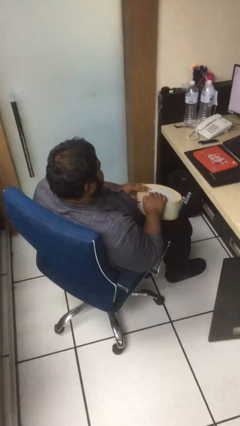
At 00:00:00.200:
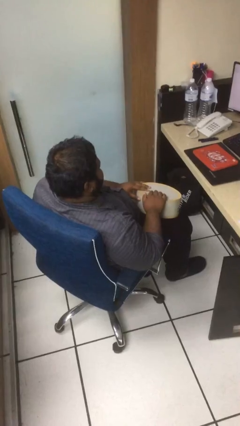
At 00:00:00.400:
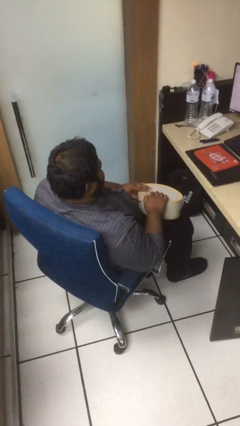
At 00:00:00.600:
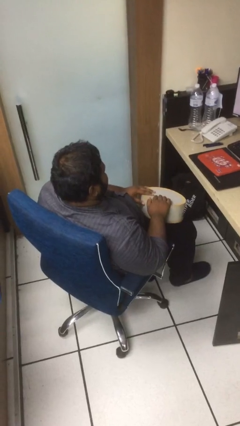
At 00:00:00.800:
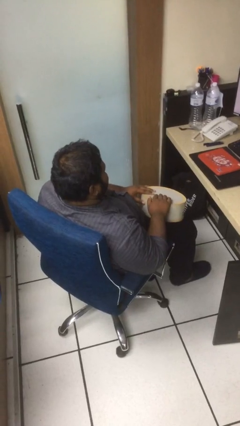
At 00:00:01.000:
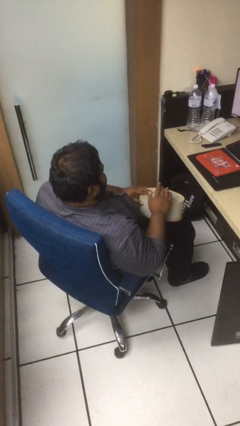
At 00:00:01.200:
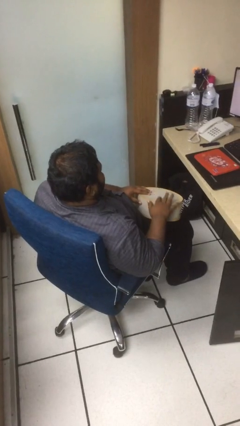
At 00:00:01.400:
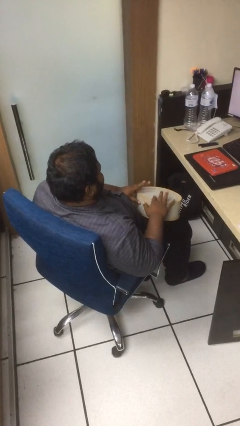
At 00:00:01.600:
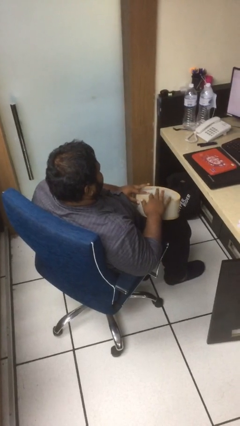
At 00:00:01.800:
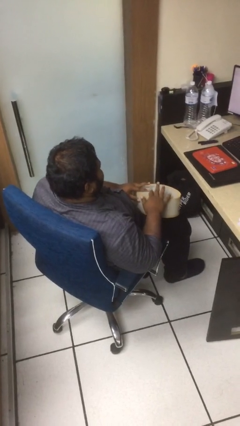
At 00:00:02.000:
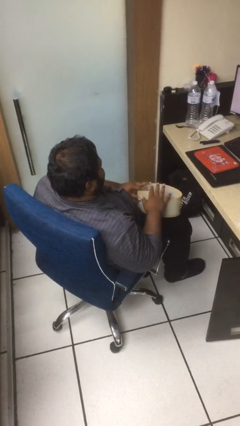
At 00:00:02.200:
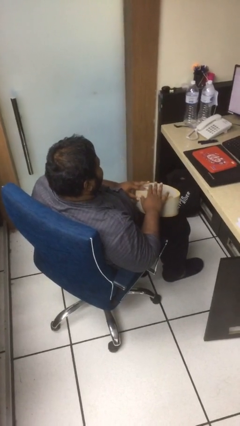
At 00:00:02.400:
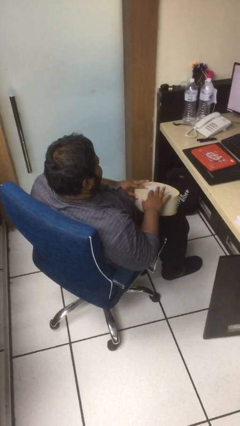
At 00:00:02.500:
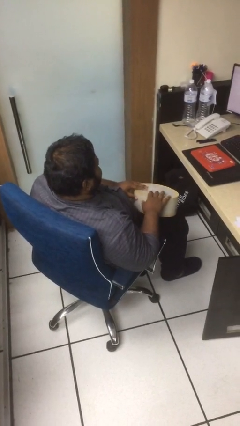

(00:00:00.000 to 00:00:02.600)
person taps object with finger

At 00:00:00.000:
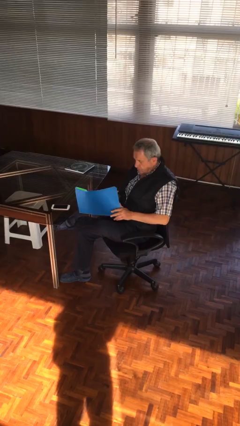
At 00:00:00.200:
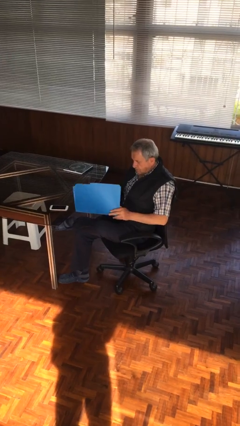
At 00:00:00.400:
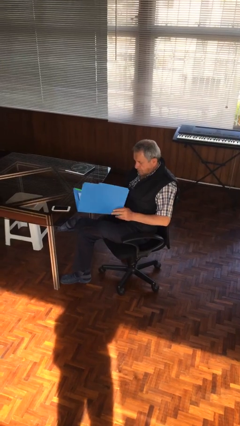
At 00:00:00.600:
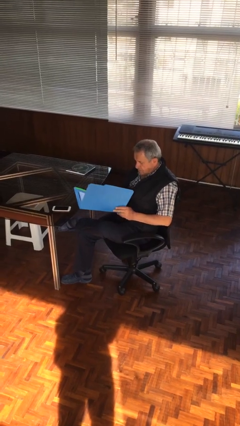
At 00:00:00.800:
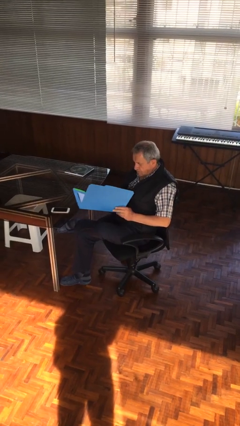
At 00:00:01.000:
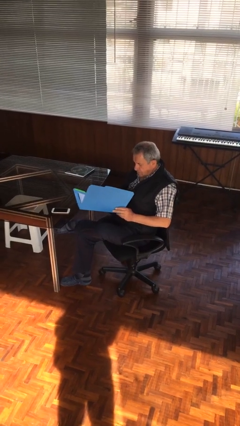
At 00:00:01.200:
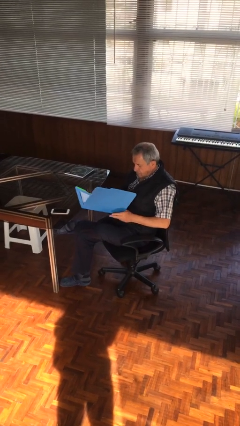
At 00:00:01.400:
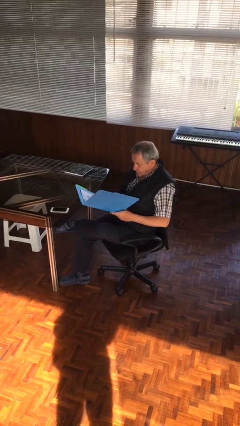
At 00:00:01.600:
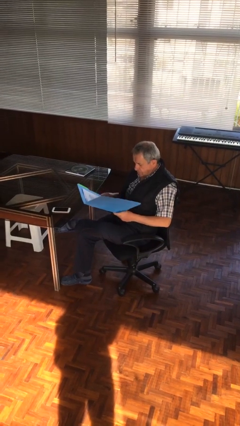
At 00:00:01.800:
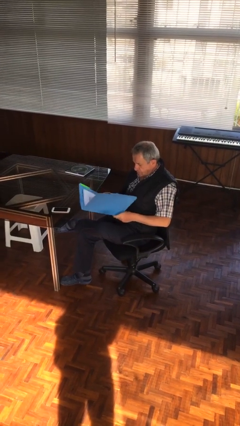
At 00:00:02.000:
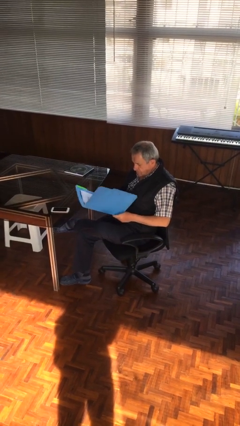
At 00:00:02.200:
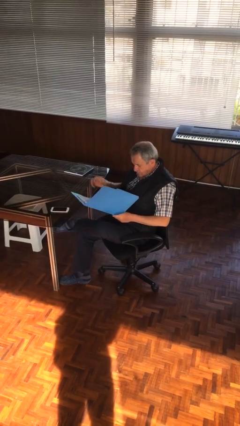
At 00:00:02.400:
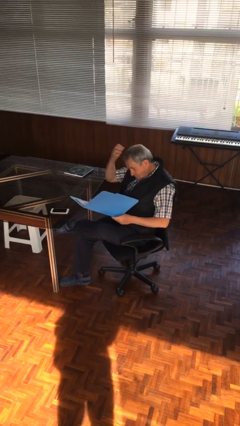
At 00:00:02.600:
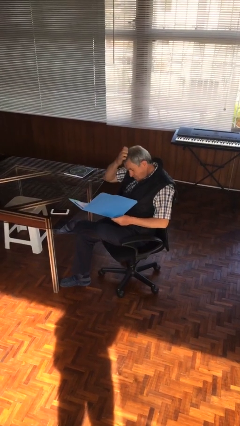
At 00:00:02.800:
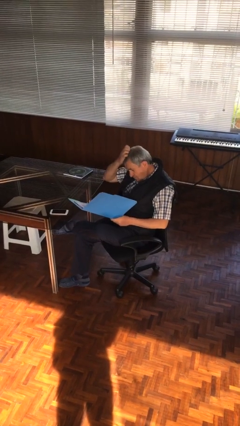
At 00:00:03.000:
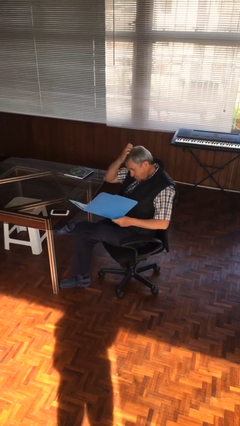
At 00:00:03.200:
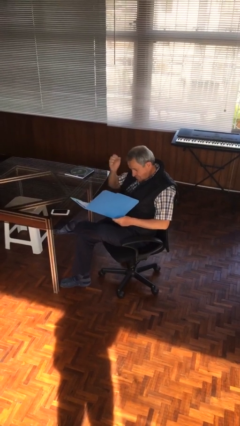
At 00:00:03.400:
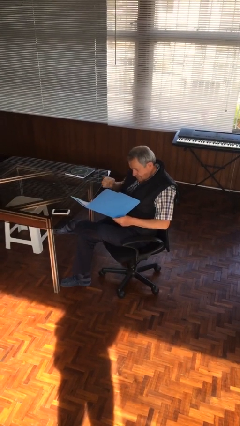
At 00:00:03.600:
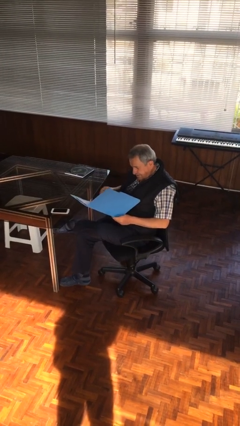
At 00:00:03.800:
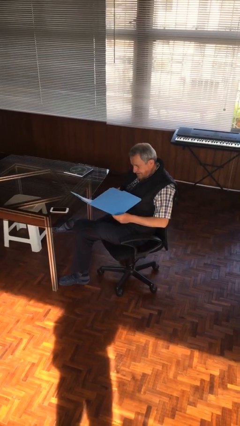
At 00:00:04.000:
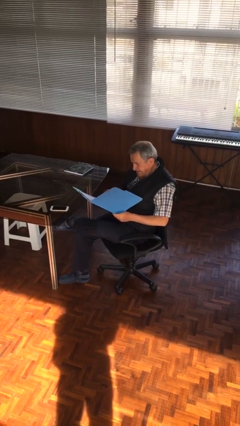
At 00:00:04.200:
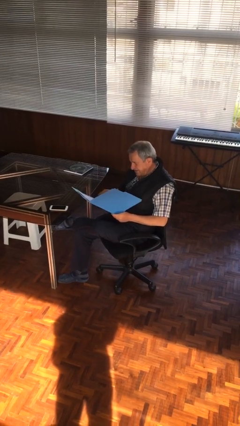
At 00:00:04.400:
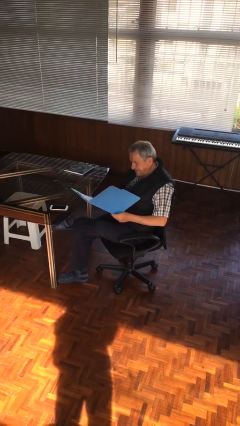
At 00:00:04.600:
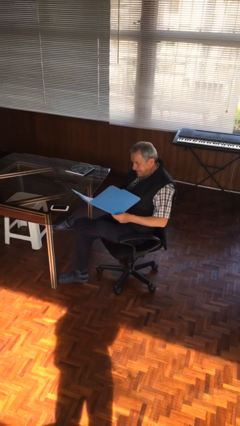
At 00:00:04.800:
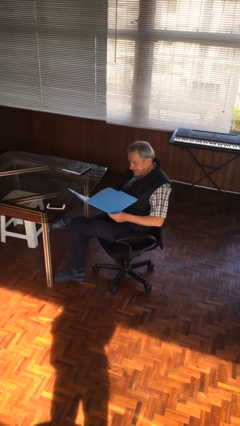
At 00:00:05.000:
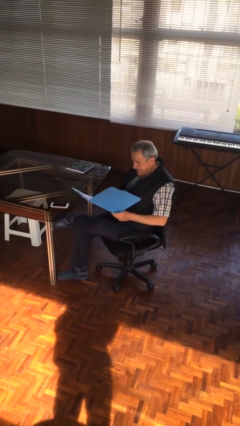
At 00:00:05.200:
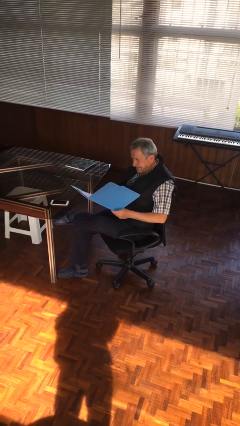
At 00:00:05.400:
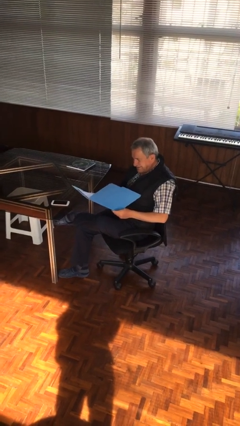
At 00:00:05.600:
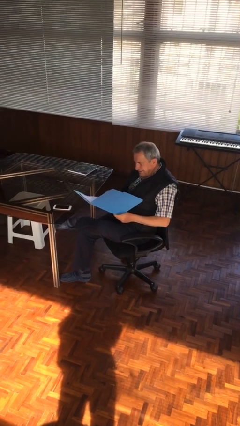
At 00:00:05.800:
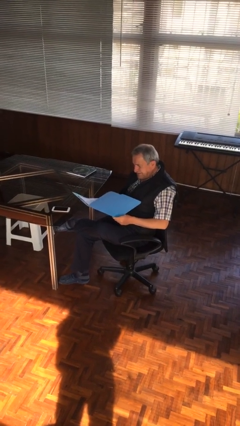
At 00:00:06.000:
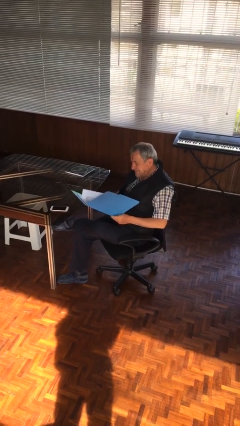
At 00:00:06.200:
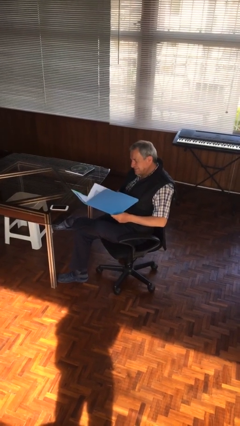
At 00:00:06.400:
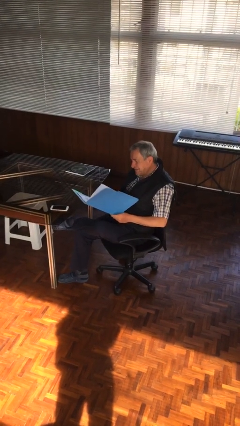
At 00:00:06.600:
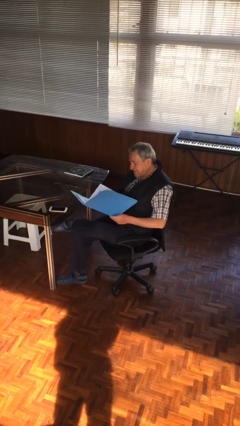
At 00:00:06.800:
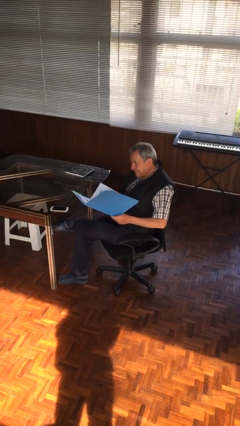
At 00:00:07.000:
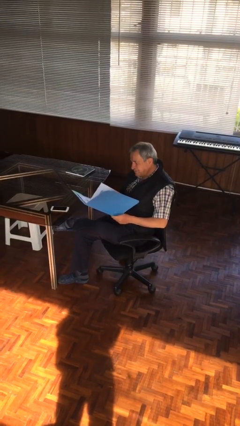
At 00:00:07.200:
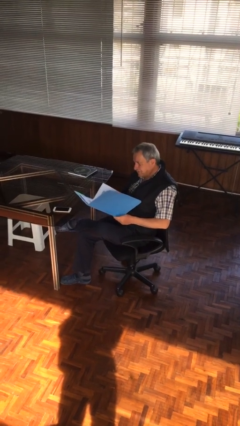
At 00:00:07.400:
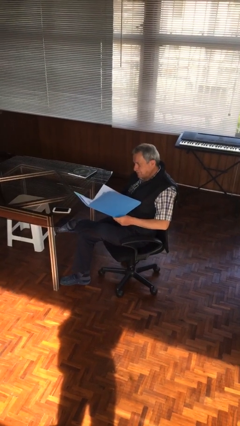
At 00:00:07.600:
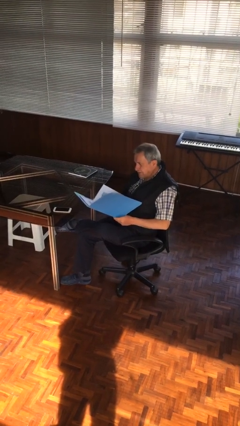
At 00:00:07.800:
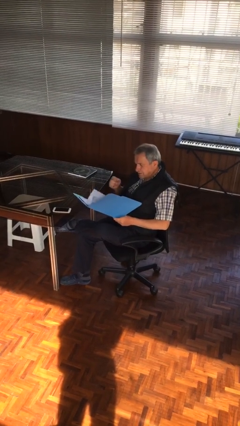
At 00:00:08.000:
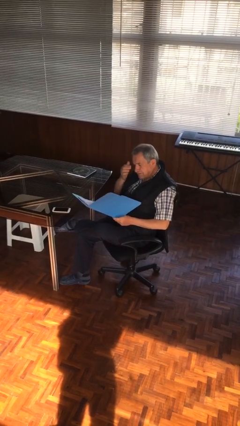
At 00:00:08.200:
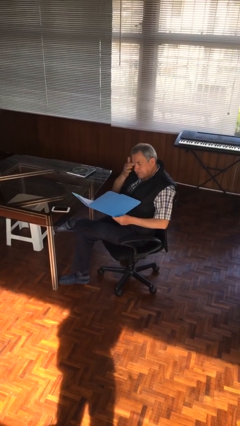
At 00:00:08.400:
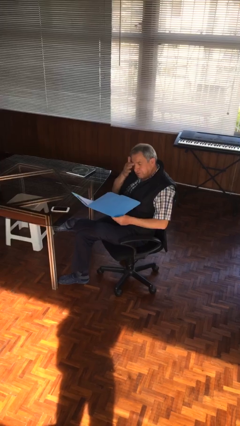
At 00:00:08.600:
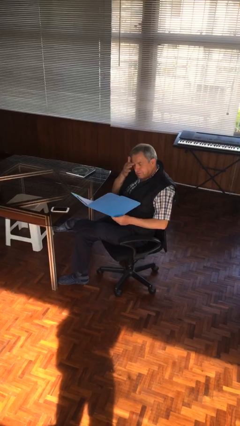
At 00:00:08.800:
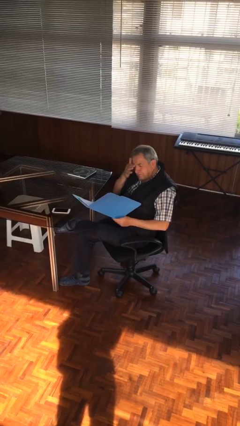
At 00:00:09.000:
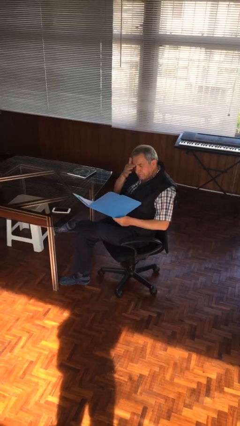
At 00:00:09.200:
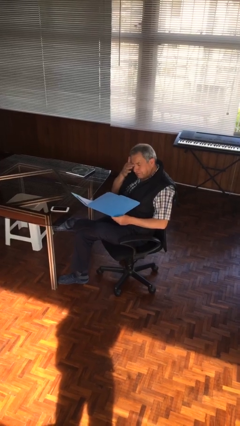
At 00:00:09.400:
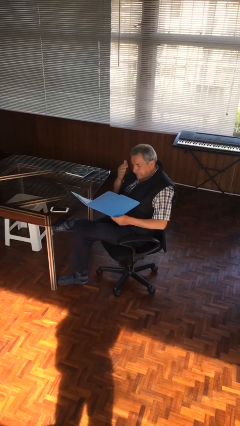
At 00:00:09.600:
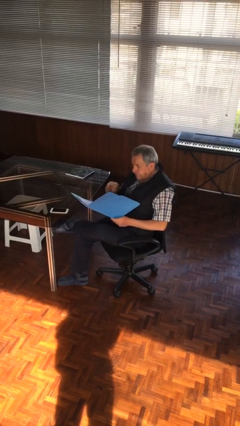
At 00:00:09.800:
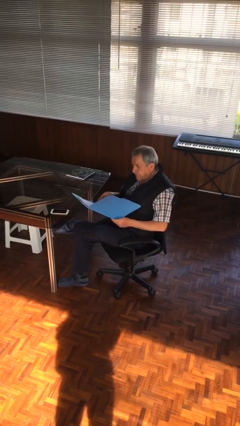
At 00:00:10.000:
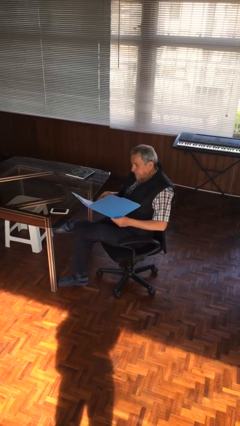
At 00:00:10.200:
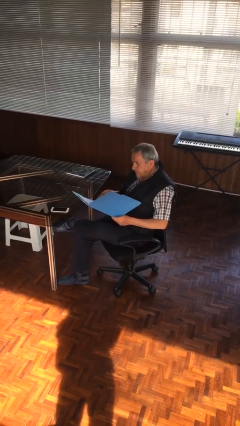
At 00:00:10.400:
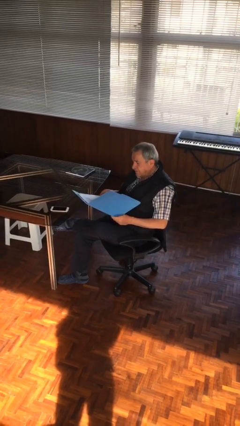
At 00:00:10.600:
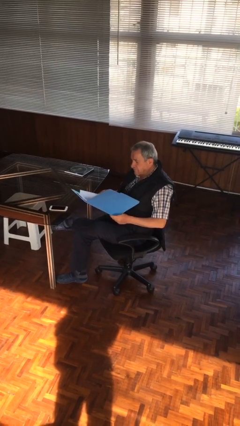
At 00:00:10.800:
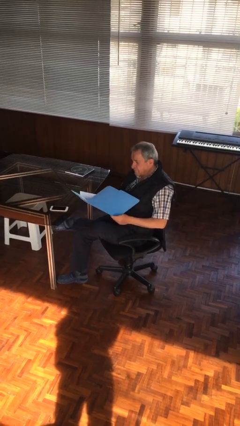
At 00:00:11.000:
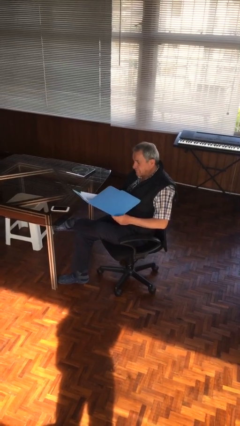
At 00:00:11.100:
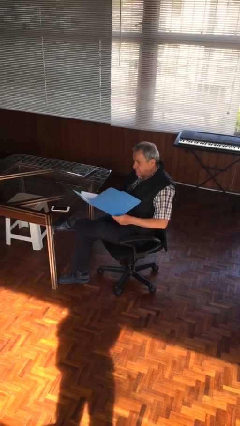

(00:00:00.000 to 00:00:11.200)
person reads document

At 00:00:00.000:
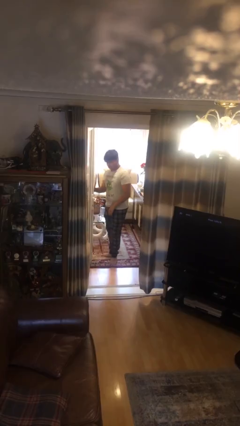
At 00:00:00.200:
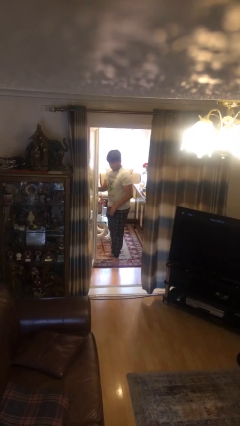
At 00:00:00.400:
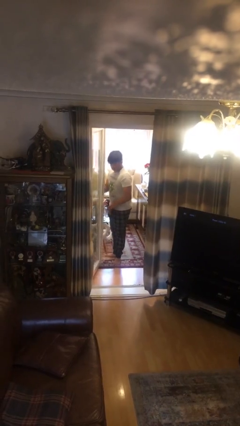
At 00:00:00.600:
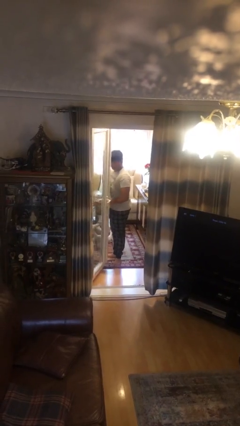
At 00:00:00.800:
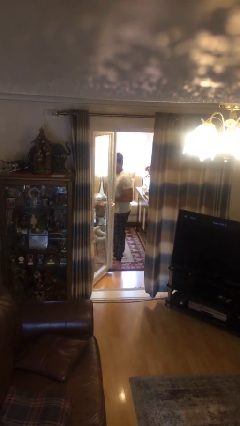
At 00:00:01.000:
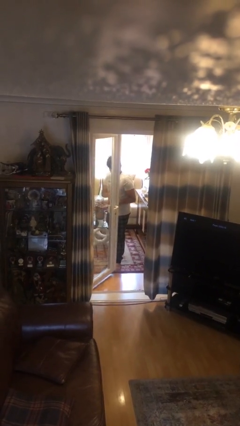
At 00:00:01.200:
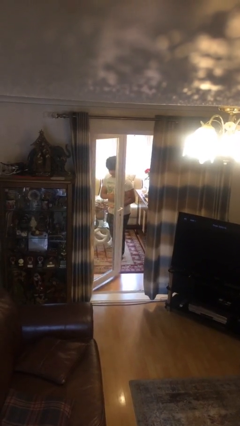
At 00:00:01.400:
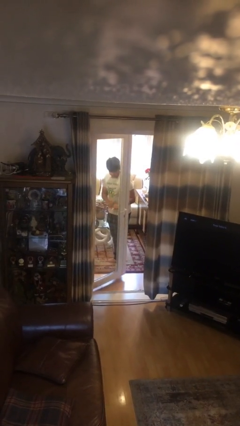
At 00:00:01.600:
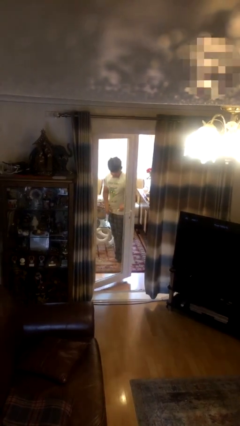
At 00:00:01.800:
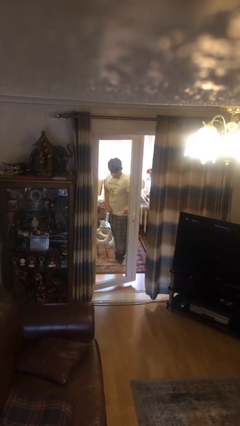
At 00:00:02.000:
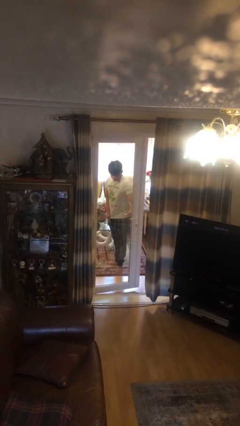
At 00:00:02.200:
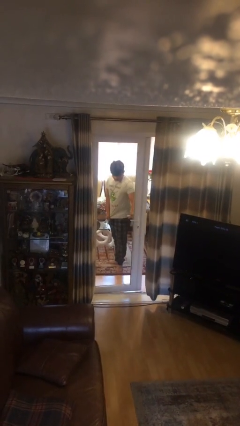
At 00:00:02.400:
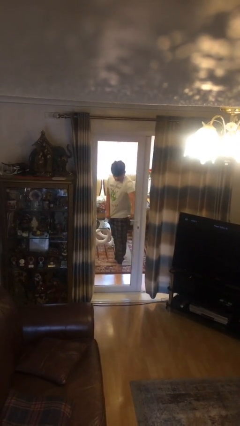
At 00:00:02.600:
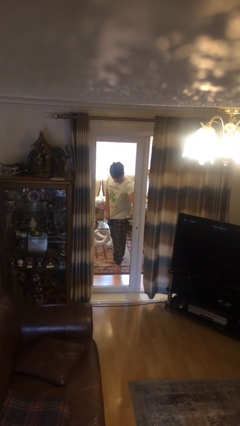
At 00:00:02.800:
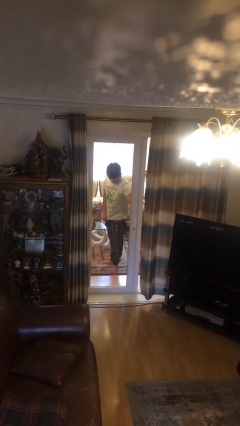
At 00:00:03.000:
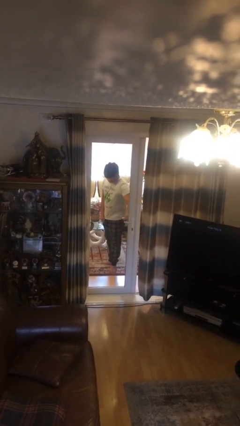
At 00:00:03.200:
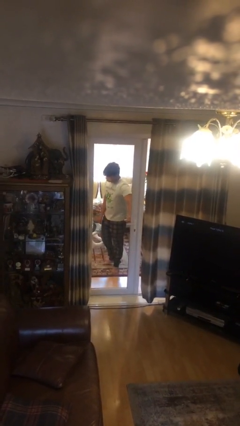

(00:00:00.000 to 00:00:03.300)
person closes facility door

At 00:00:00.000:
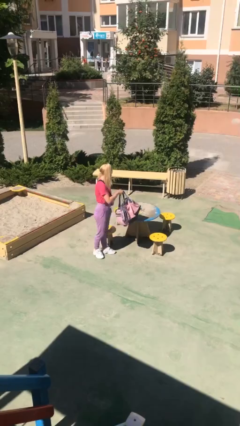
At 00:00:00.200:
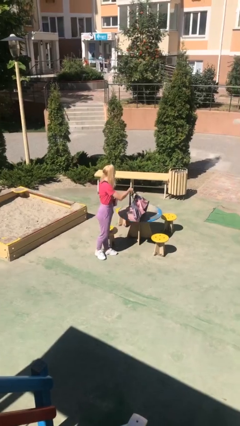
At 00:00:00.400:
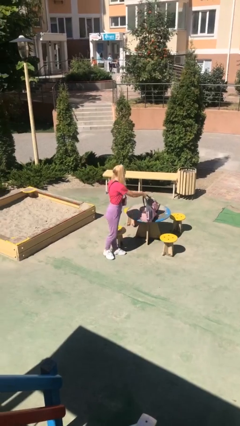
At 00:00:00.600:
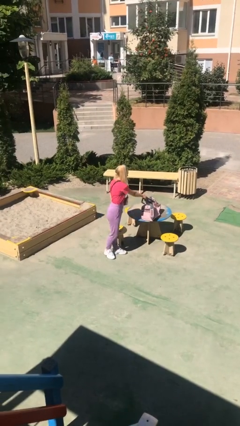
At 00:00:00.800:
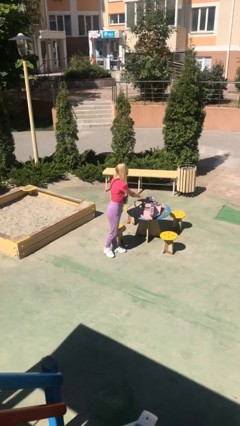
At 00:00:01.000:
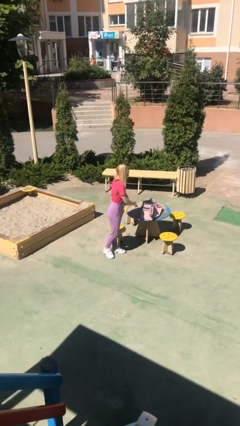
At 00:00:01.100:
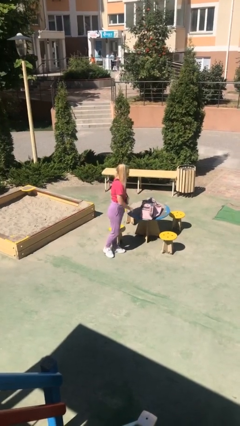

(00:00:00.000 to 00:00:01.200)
person puts down object on table
